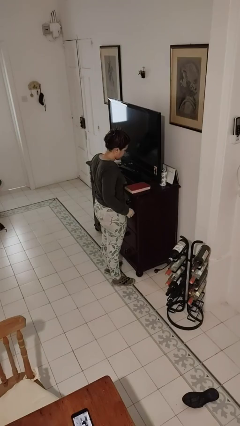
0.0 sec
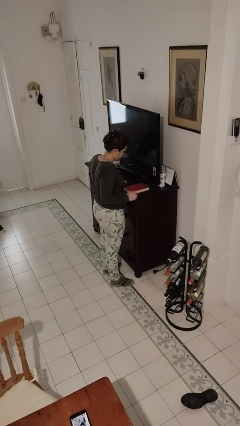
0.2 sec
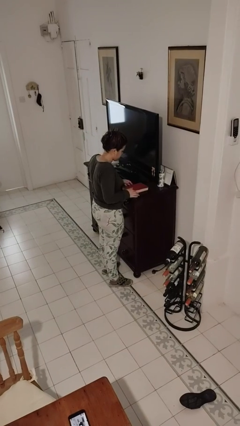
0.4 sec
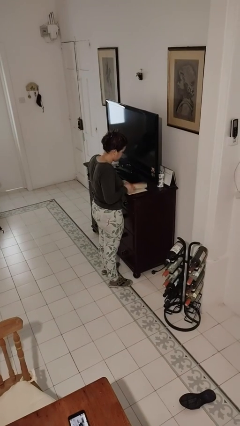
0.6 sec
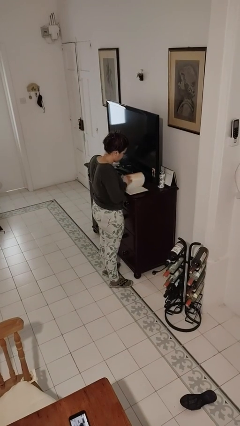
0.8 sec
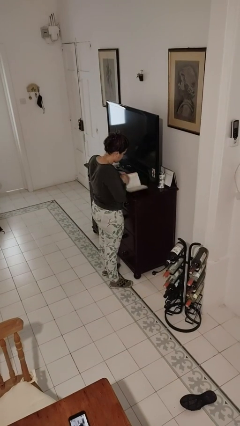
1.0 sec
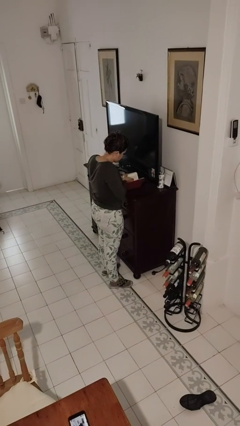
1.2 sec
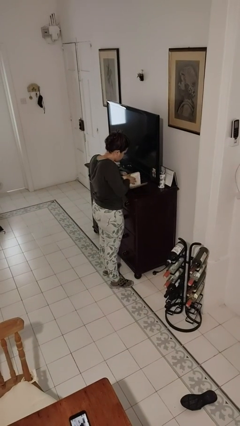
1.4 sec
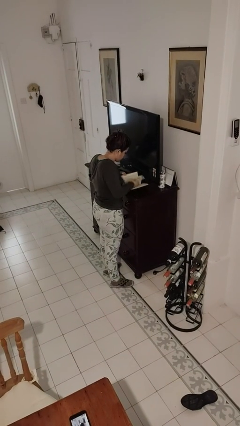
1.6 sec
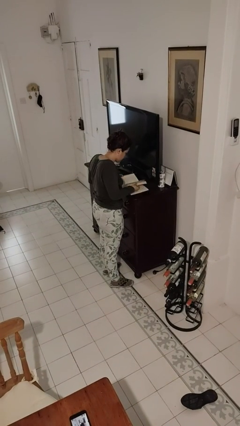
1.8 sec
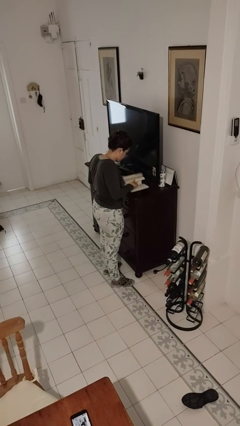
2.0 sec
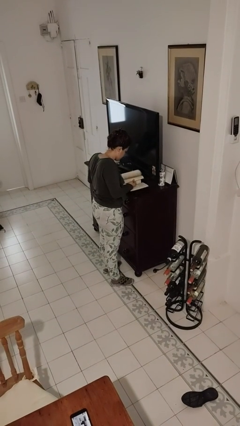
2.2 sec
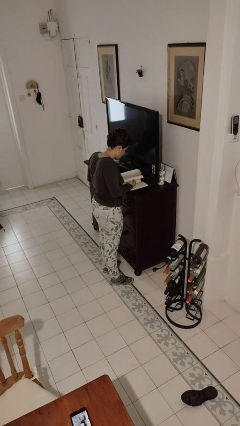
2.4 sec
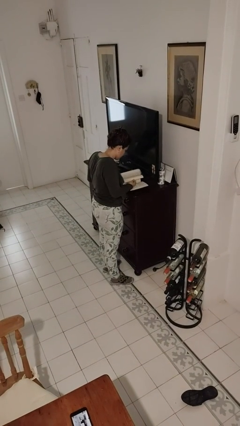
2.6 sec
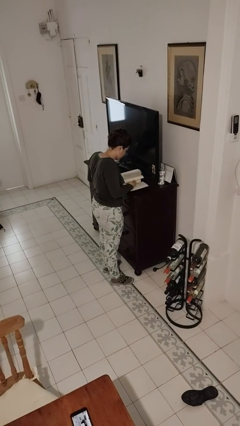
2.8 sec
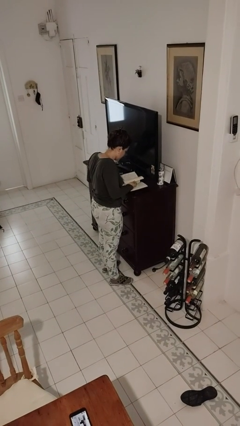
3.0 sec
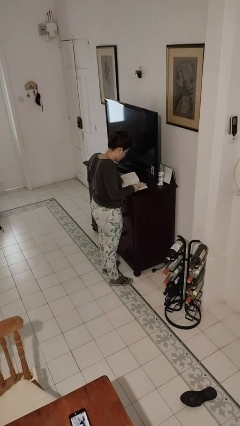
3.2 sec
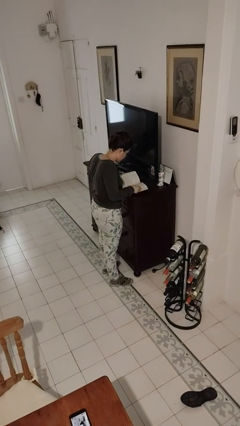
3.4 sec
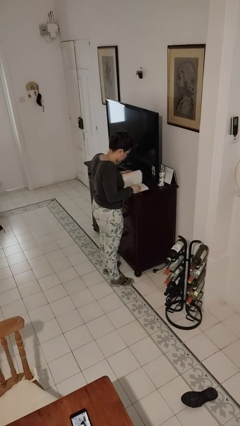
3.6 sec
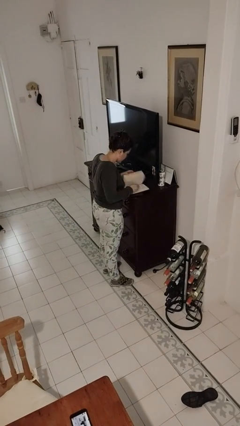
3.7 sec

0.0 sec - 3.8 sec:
person reads book

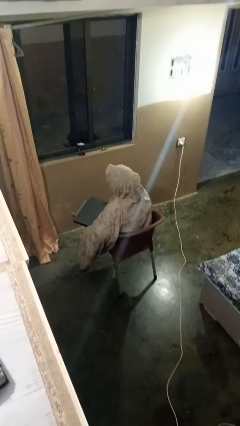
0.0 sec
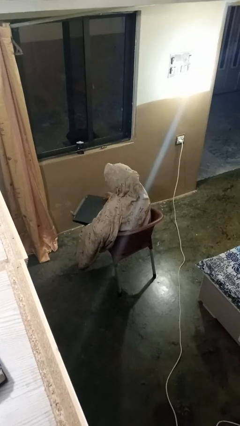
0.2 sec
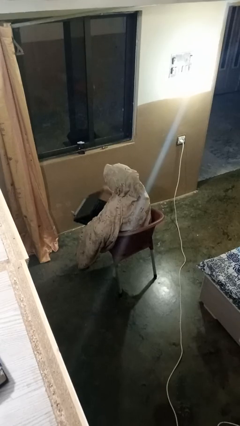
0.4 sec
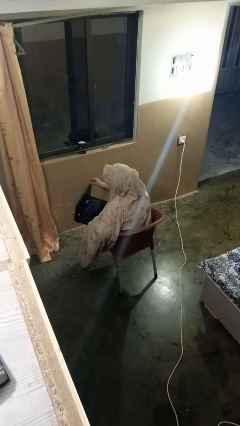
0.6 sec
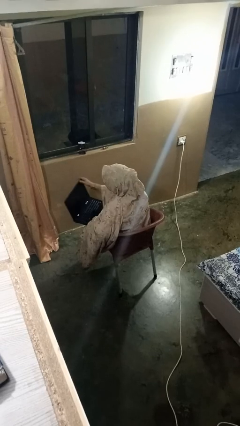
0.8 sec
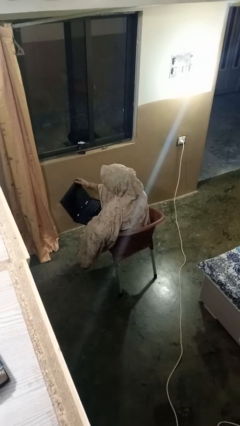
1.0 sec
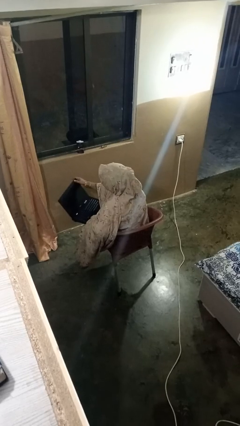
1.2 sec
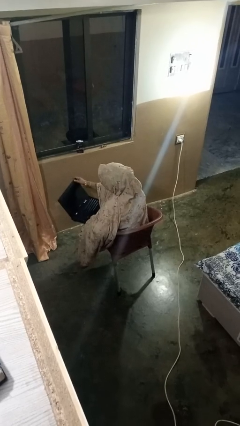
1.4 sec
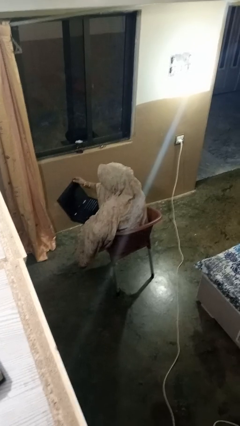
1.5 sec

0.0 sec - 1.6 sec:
person opens laptop

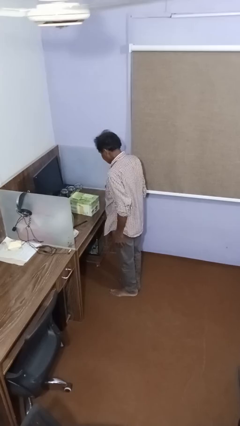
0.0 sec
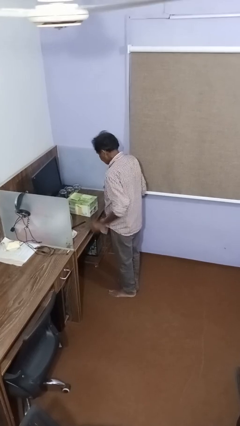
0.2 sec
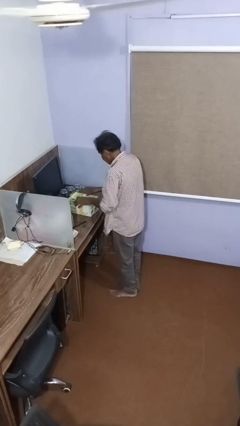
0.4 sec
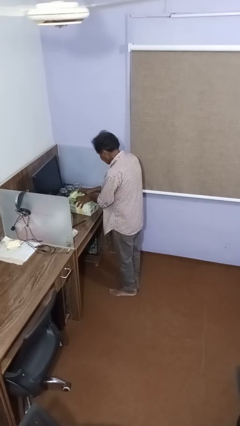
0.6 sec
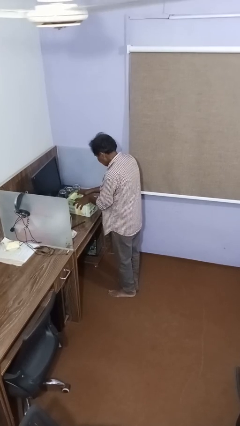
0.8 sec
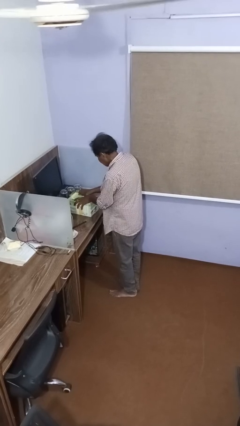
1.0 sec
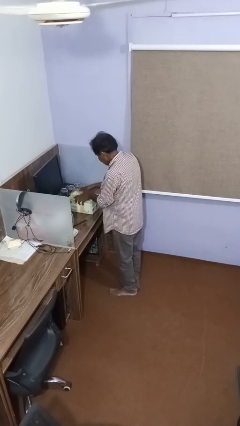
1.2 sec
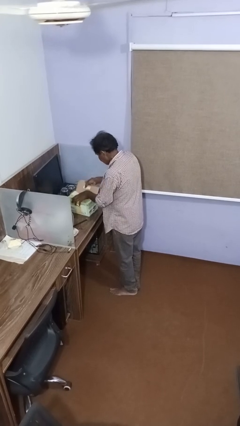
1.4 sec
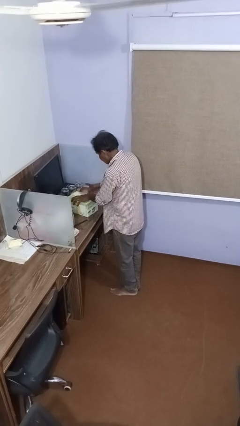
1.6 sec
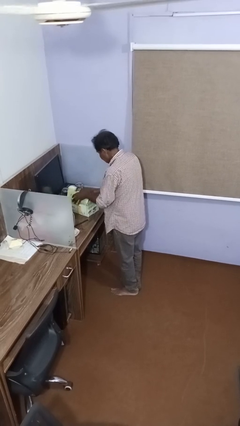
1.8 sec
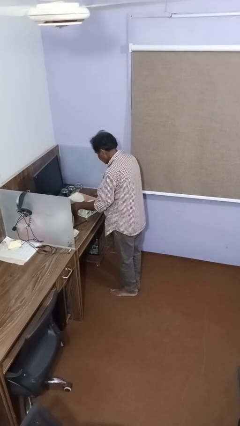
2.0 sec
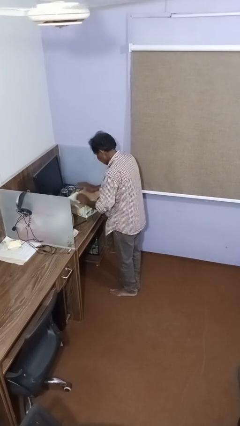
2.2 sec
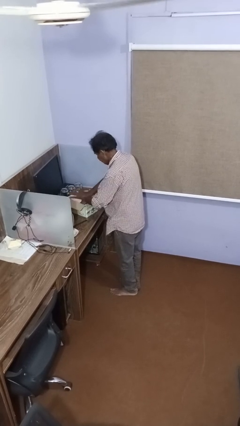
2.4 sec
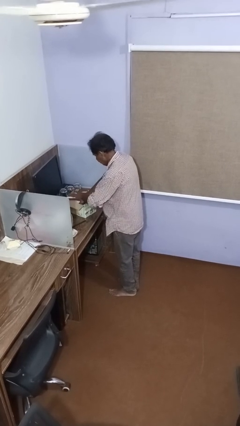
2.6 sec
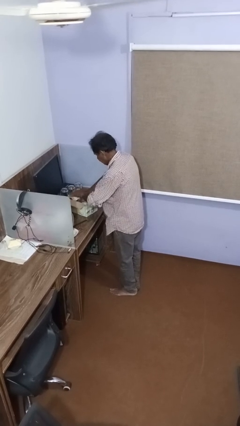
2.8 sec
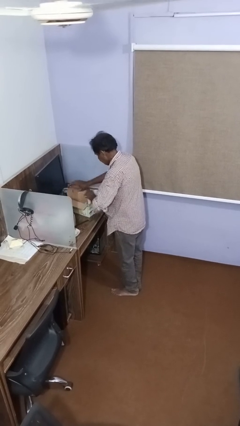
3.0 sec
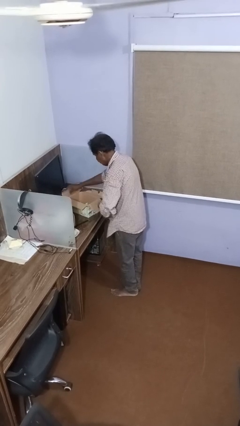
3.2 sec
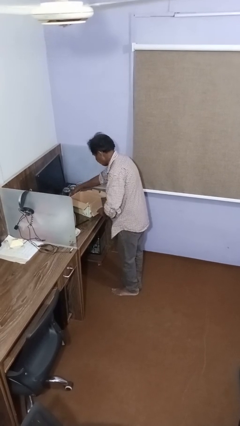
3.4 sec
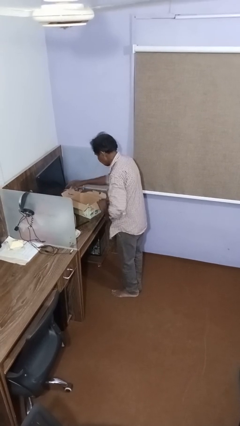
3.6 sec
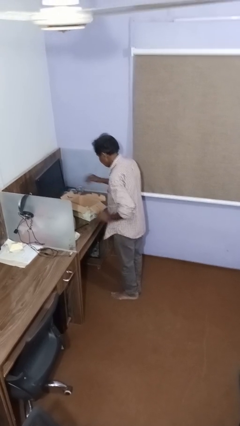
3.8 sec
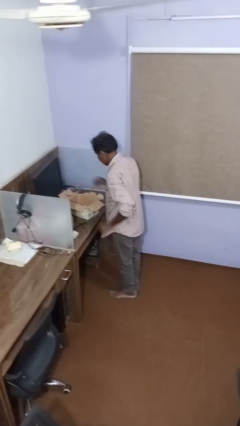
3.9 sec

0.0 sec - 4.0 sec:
person opens box

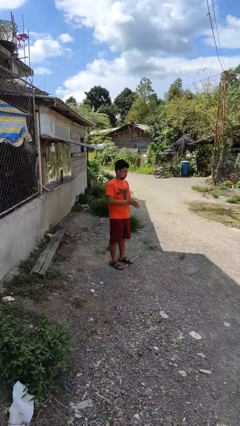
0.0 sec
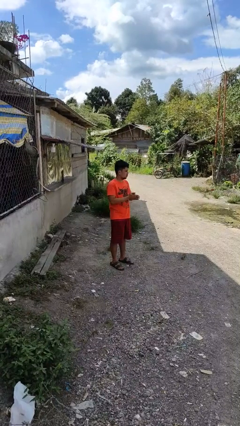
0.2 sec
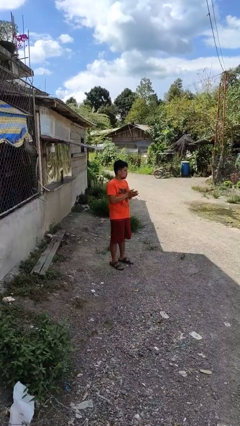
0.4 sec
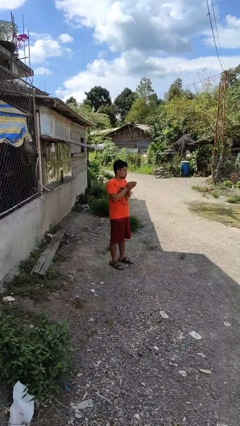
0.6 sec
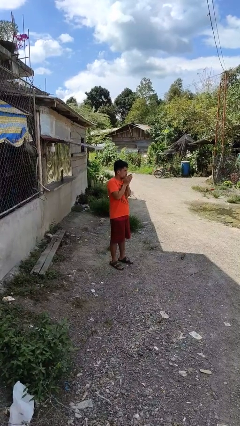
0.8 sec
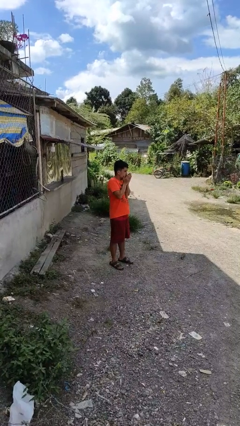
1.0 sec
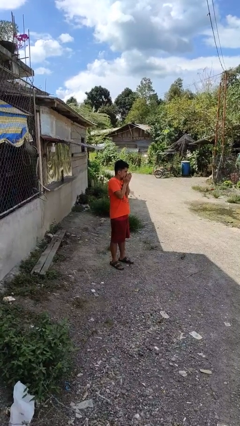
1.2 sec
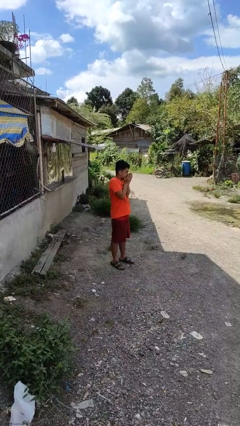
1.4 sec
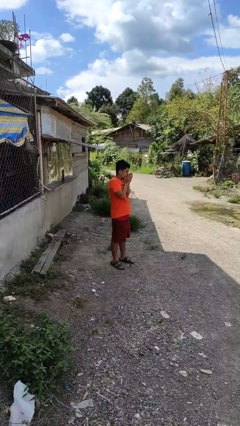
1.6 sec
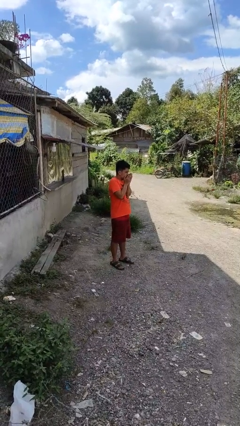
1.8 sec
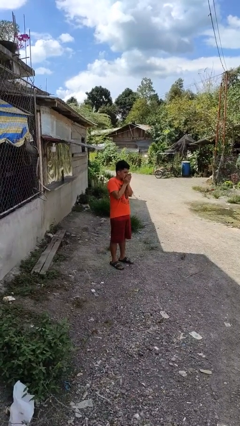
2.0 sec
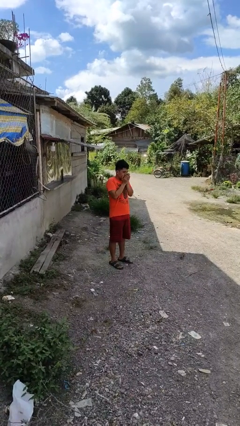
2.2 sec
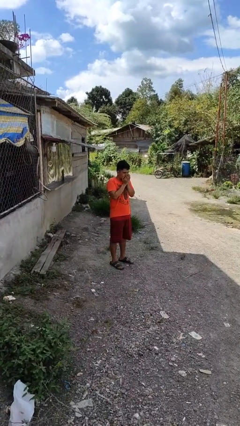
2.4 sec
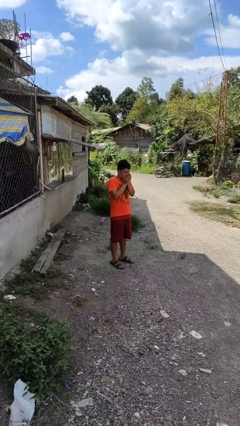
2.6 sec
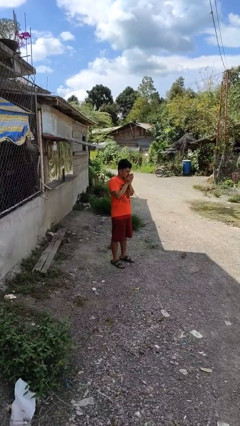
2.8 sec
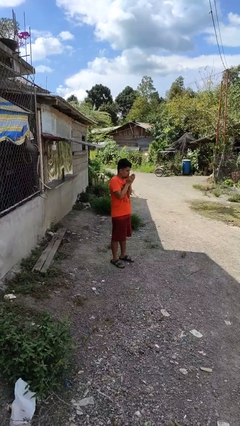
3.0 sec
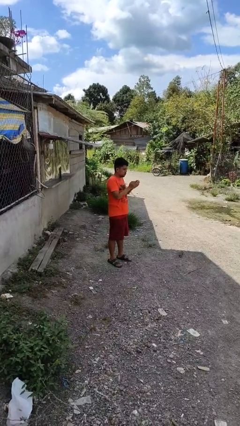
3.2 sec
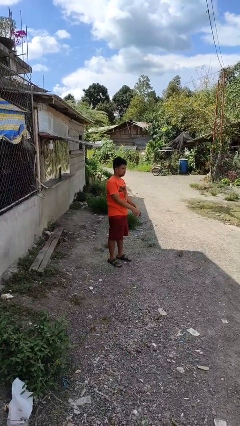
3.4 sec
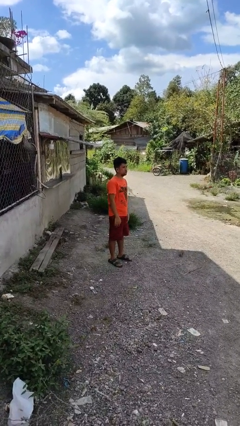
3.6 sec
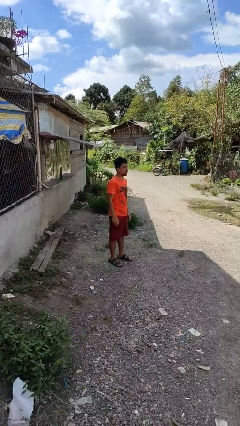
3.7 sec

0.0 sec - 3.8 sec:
person blows into hands

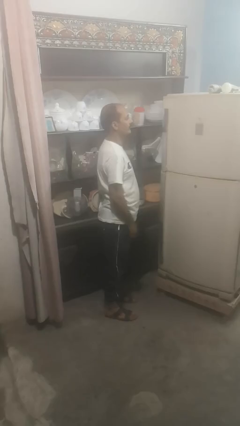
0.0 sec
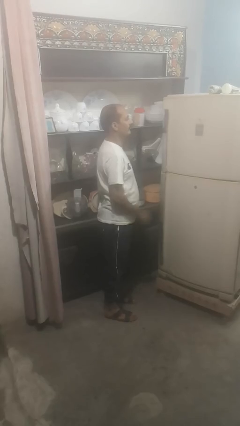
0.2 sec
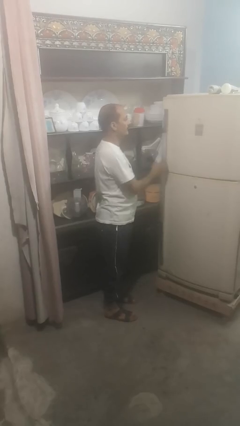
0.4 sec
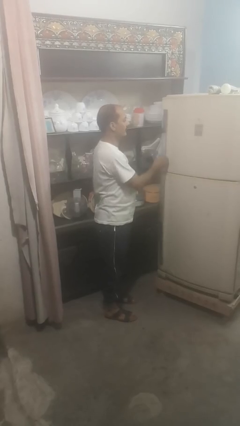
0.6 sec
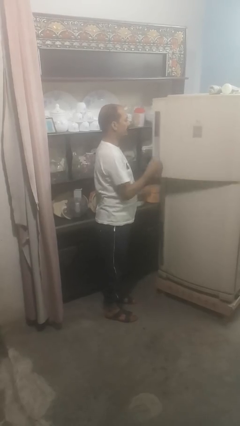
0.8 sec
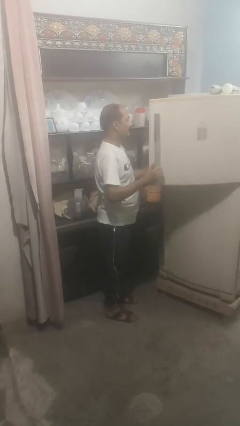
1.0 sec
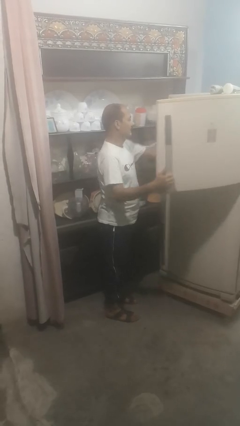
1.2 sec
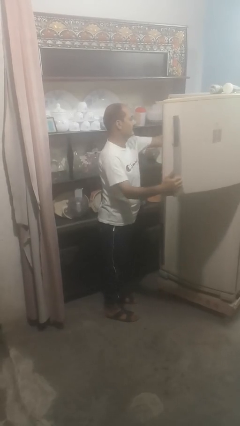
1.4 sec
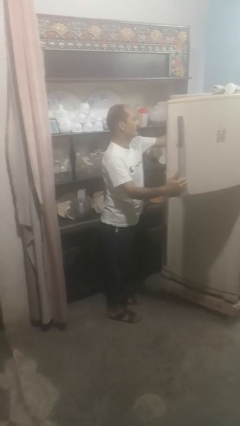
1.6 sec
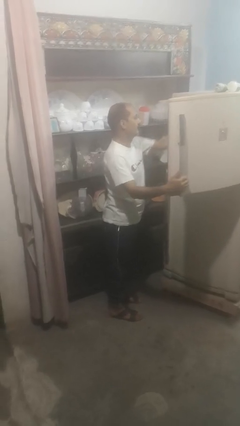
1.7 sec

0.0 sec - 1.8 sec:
person takes object from refrigerator

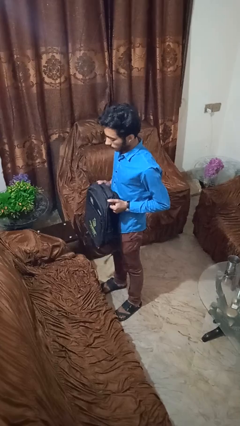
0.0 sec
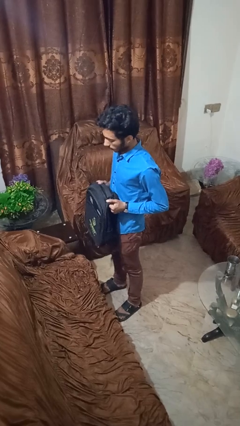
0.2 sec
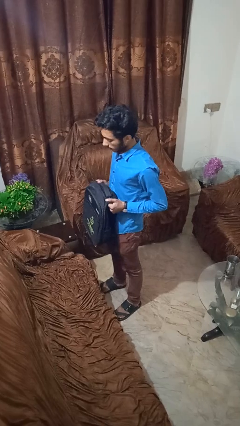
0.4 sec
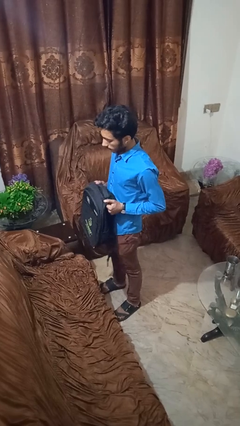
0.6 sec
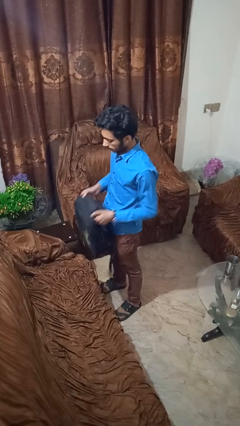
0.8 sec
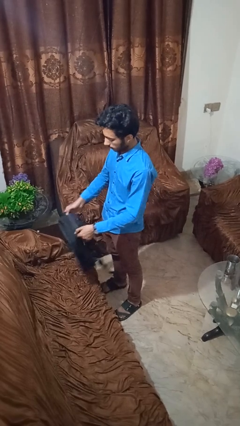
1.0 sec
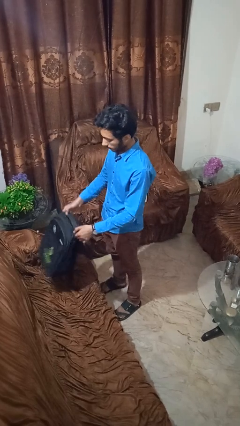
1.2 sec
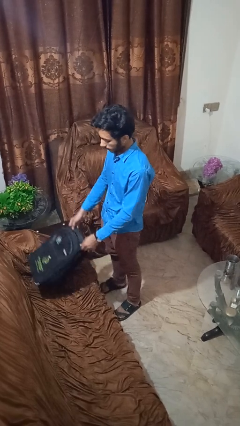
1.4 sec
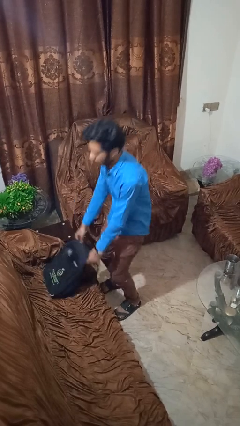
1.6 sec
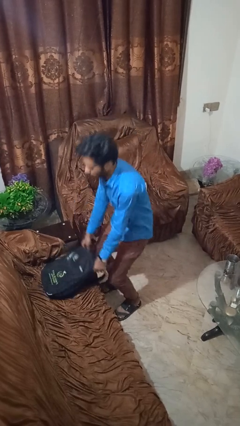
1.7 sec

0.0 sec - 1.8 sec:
person puts down object on couch

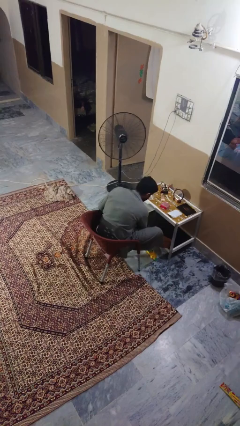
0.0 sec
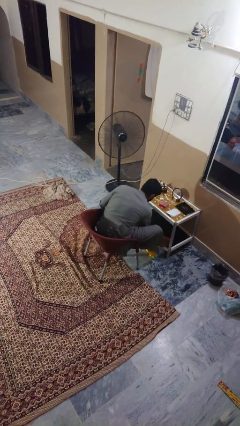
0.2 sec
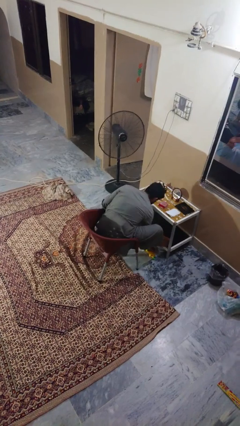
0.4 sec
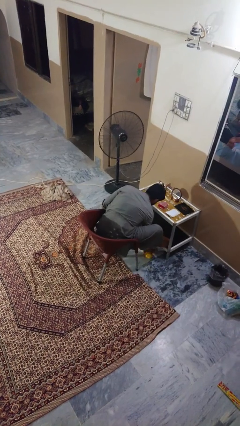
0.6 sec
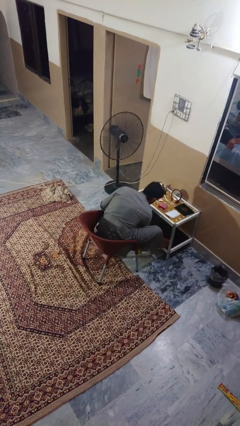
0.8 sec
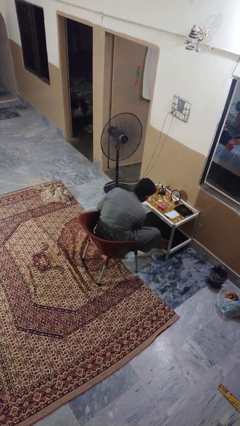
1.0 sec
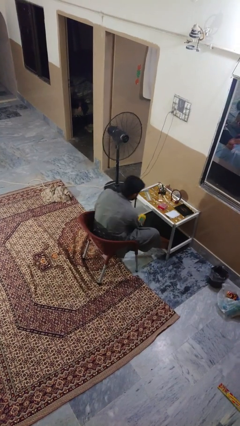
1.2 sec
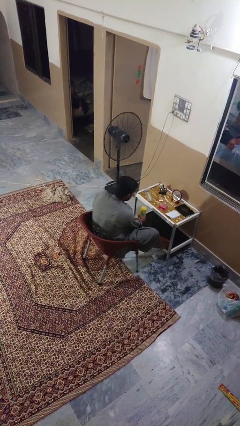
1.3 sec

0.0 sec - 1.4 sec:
person picks up object from floor
